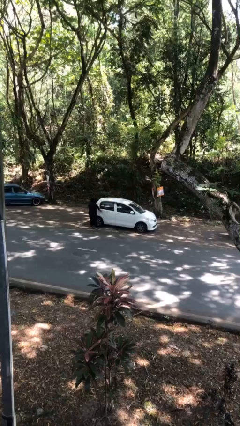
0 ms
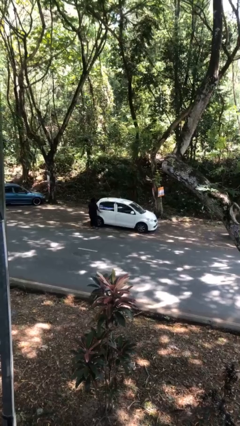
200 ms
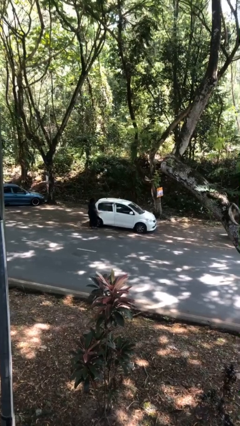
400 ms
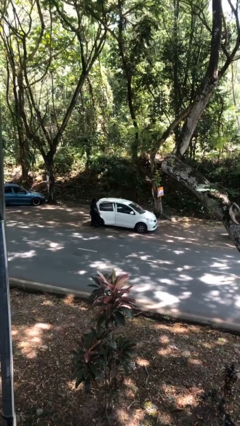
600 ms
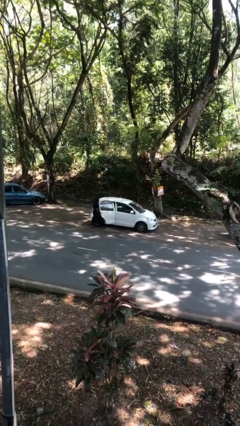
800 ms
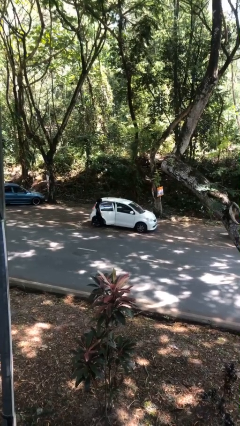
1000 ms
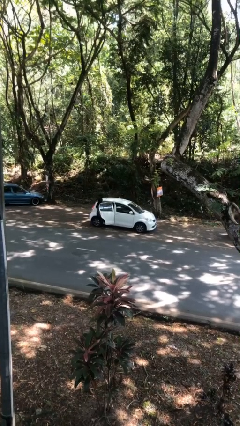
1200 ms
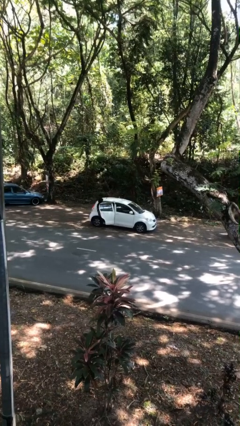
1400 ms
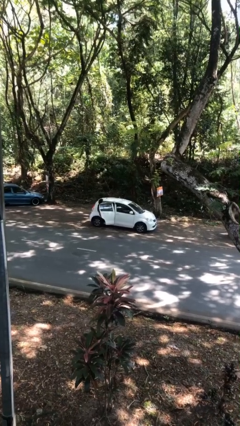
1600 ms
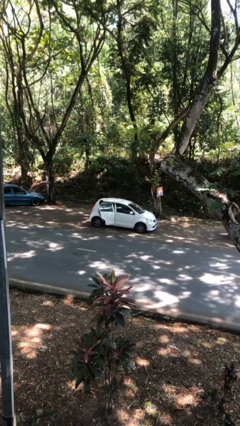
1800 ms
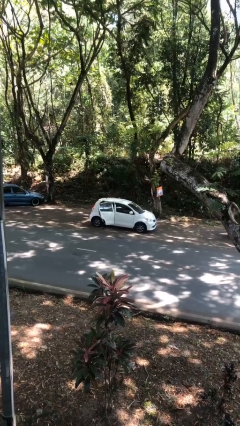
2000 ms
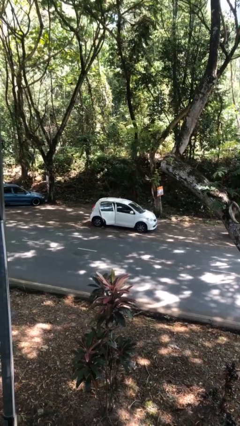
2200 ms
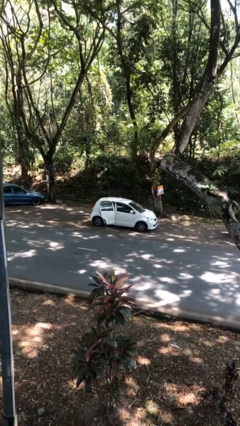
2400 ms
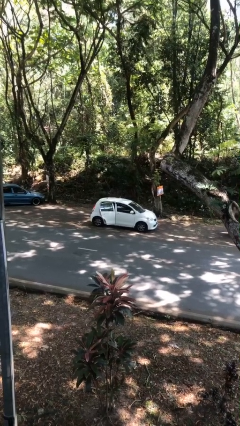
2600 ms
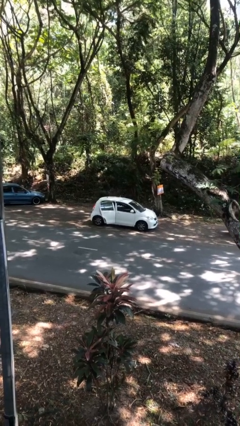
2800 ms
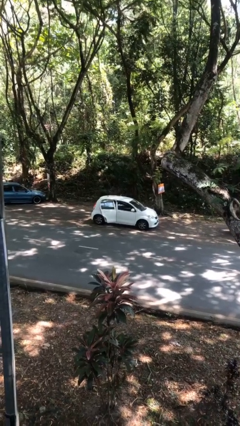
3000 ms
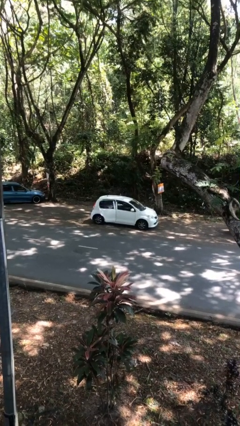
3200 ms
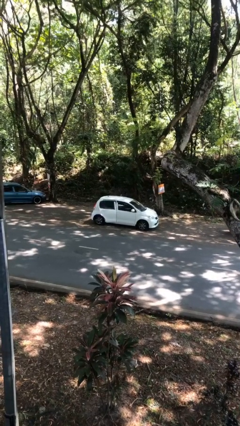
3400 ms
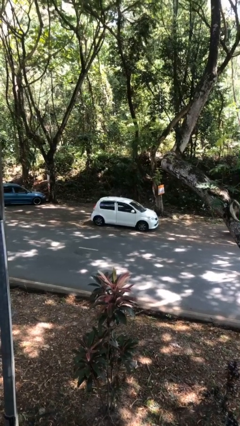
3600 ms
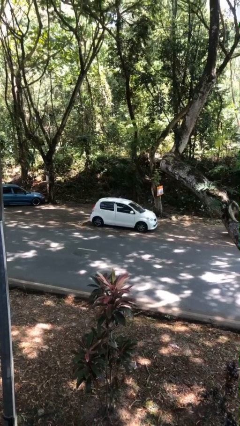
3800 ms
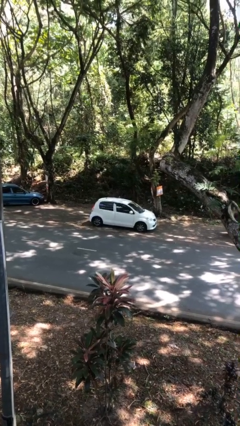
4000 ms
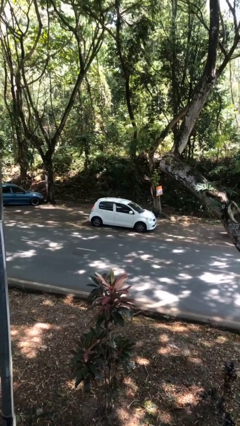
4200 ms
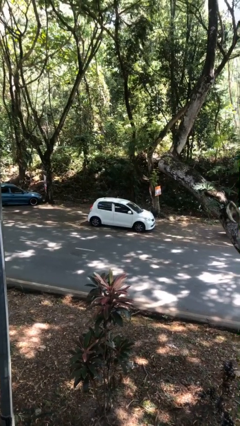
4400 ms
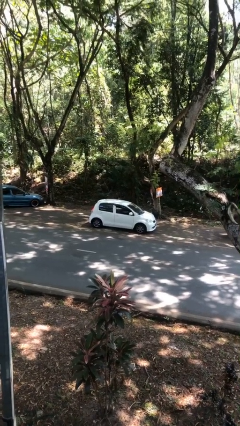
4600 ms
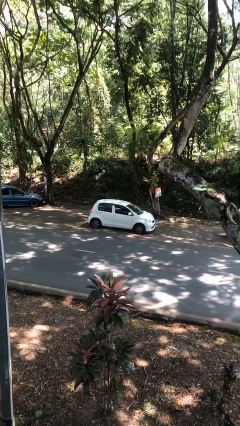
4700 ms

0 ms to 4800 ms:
car picks up person

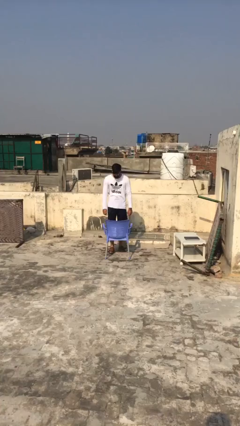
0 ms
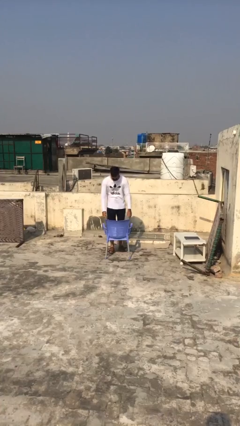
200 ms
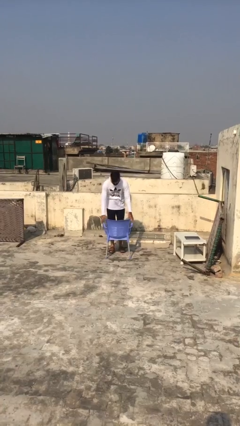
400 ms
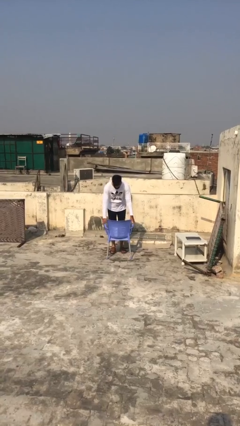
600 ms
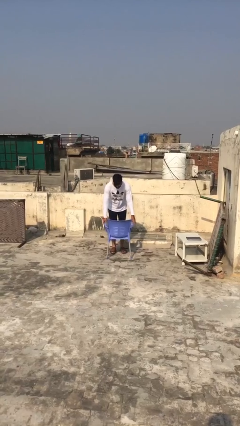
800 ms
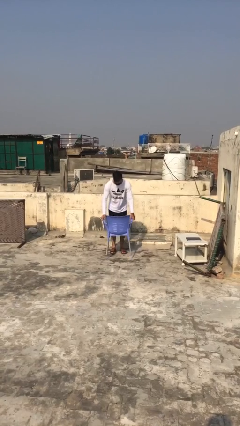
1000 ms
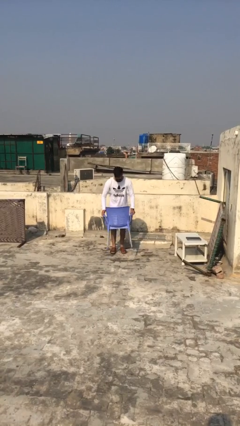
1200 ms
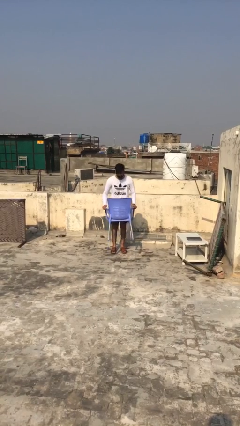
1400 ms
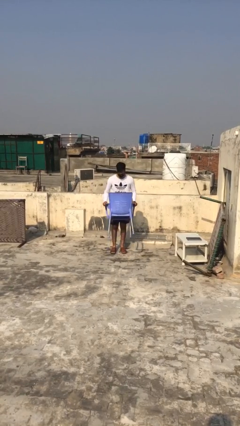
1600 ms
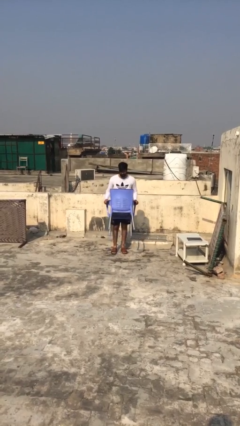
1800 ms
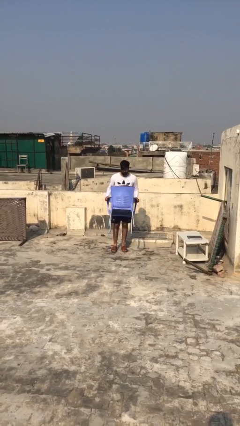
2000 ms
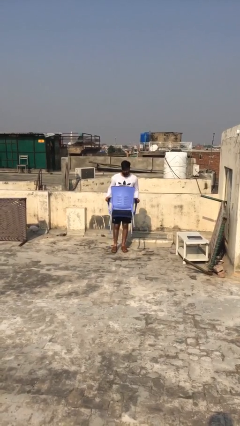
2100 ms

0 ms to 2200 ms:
person picks up object from floor

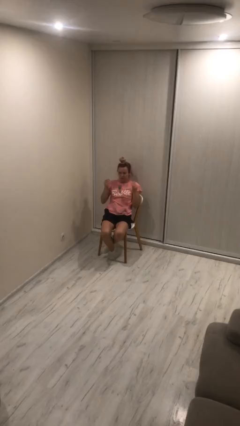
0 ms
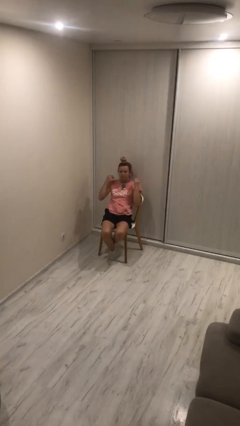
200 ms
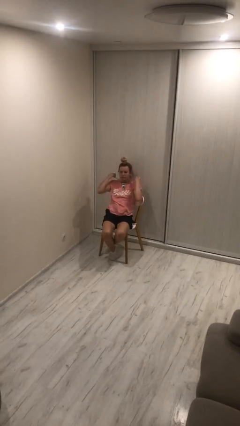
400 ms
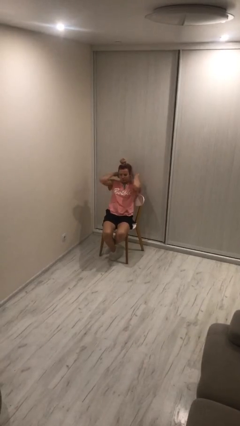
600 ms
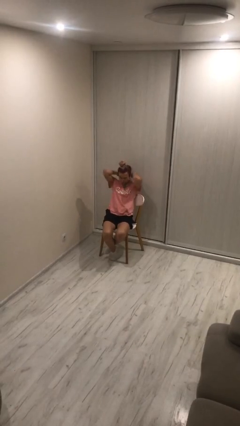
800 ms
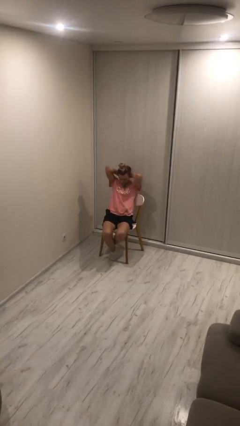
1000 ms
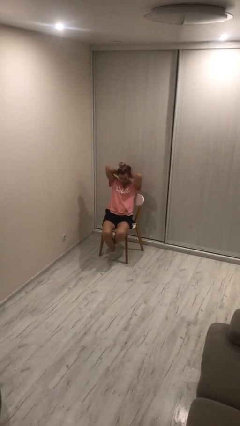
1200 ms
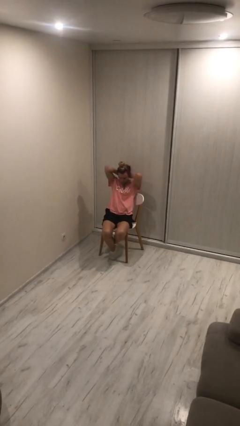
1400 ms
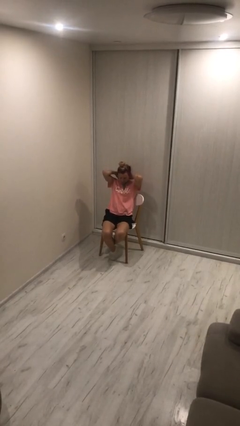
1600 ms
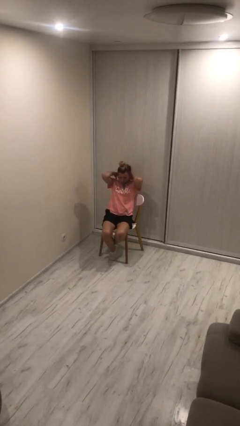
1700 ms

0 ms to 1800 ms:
person puts on necklace

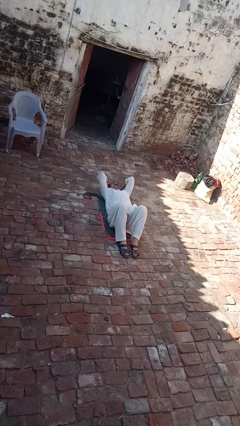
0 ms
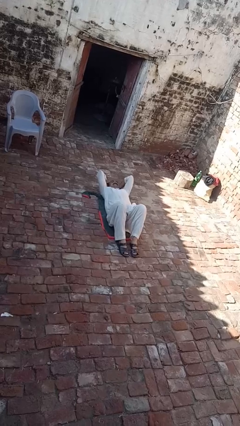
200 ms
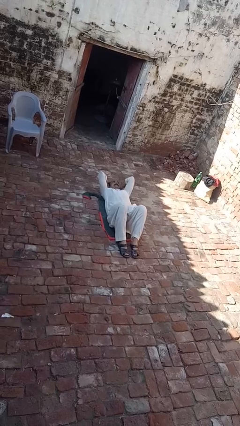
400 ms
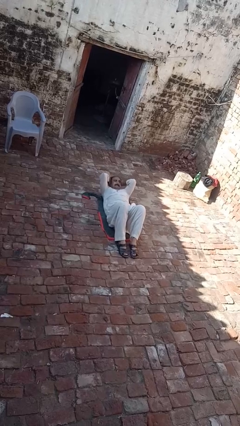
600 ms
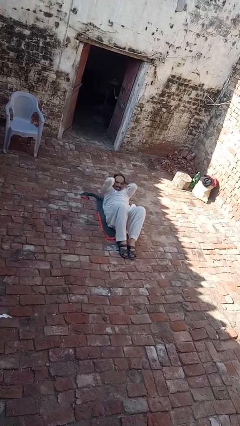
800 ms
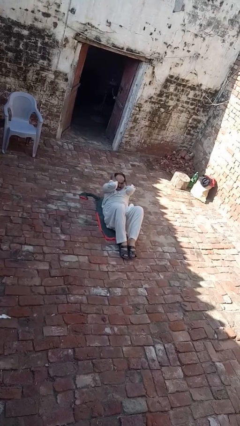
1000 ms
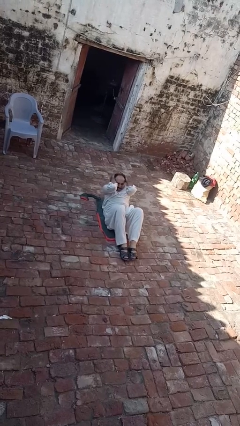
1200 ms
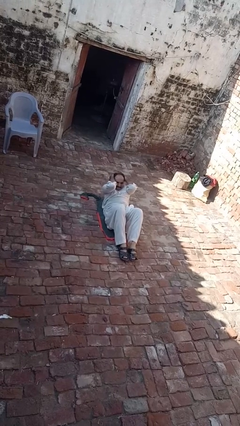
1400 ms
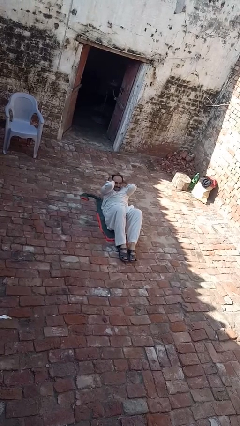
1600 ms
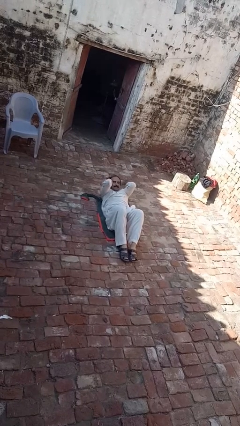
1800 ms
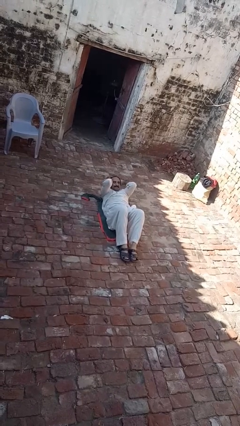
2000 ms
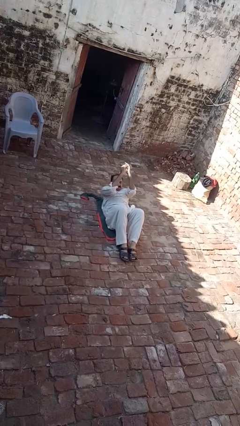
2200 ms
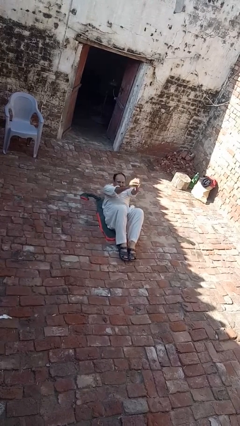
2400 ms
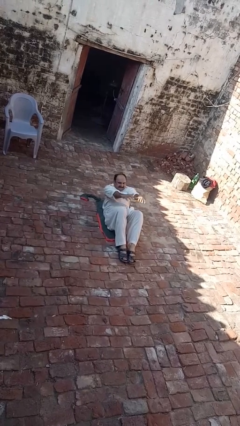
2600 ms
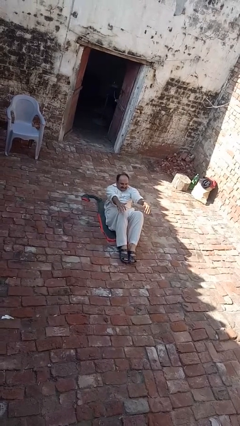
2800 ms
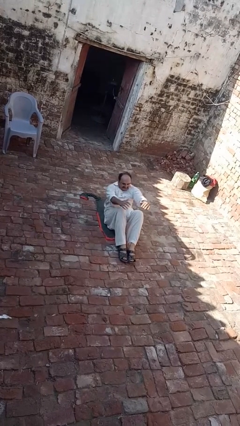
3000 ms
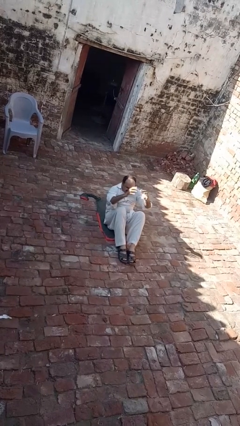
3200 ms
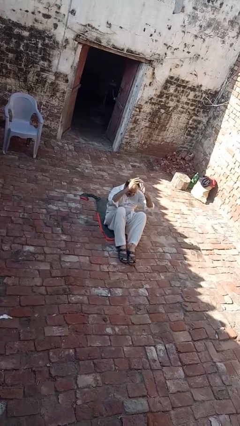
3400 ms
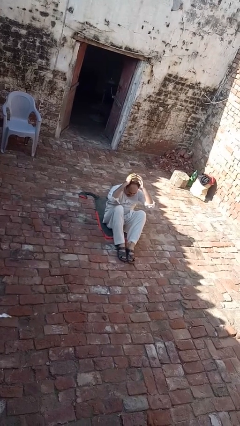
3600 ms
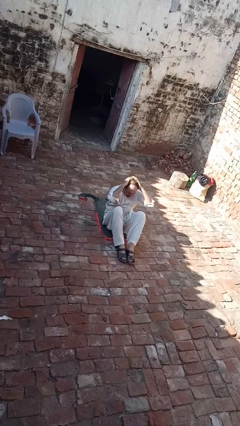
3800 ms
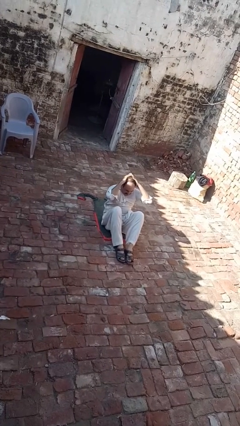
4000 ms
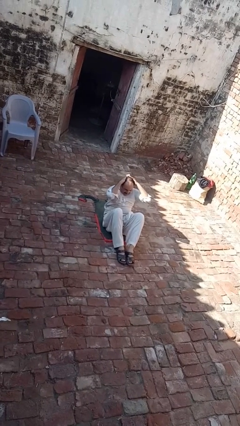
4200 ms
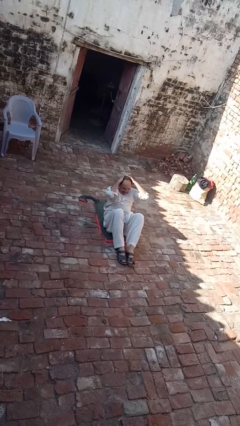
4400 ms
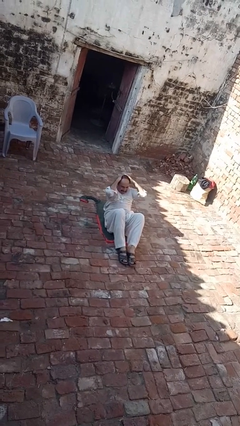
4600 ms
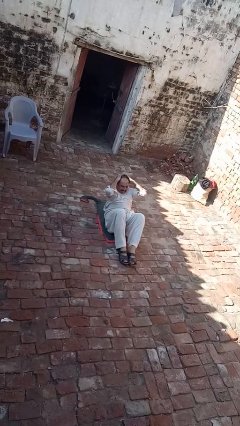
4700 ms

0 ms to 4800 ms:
person exercises with situp

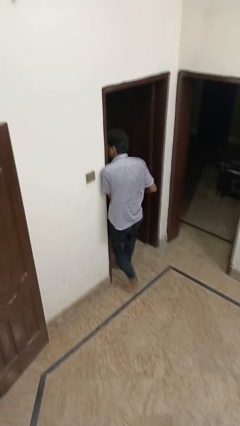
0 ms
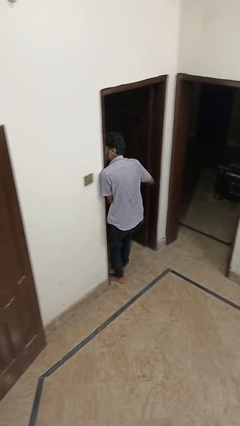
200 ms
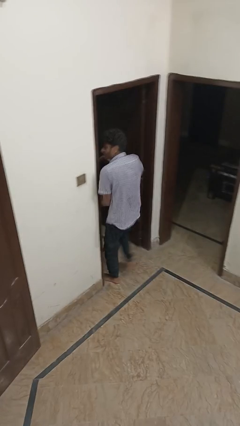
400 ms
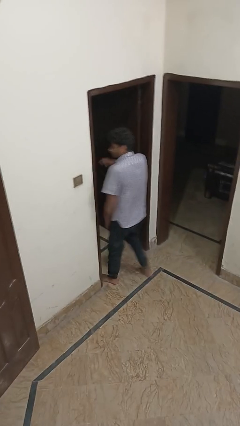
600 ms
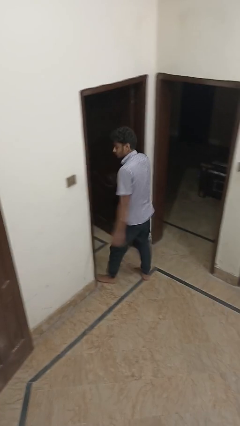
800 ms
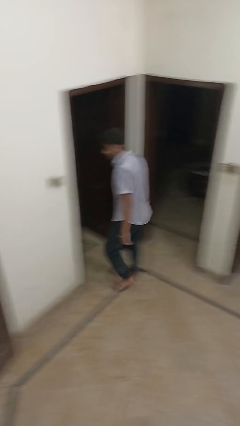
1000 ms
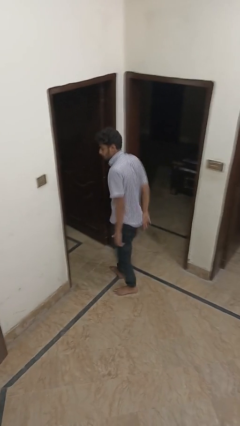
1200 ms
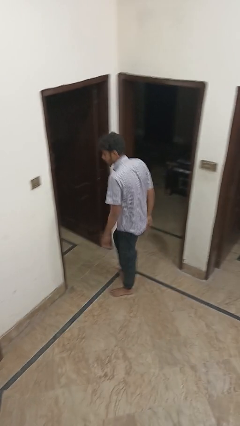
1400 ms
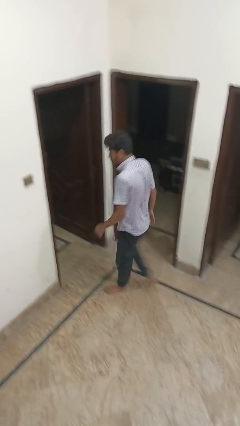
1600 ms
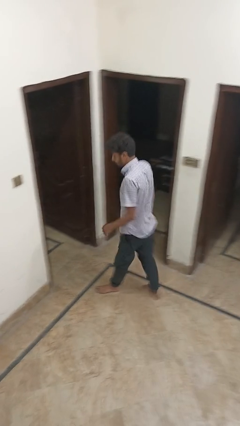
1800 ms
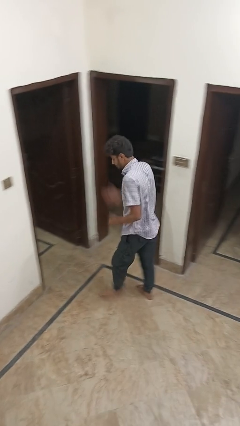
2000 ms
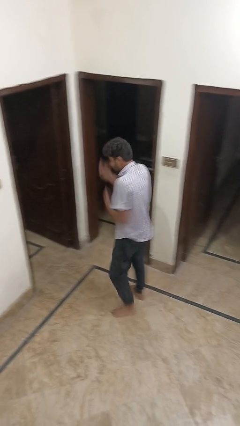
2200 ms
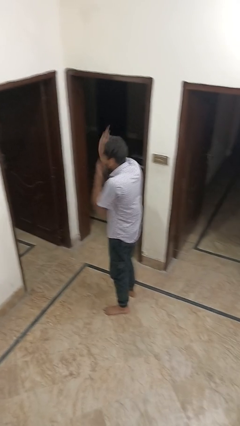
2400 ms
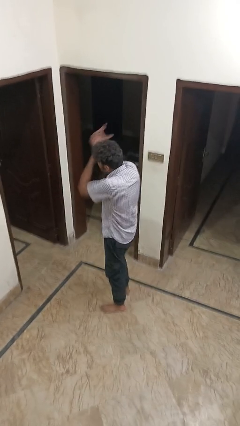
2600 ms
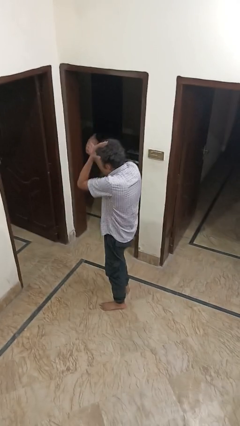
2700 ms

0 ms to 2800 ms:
person bumps into wall

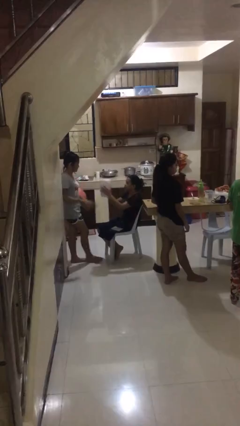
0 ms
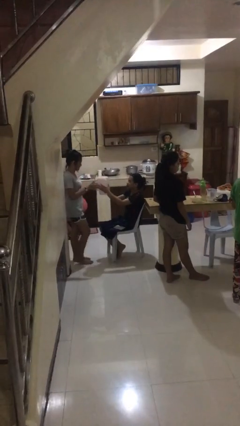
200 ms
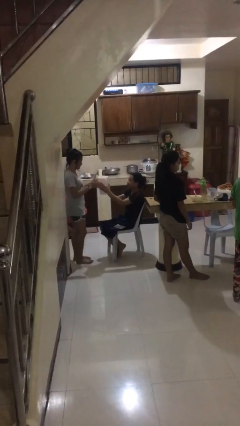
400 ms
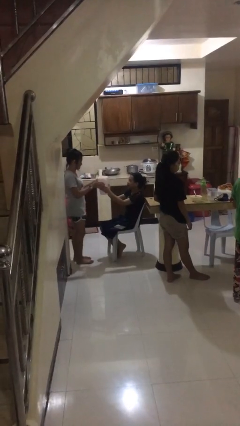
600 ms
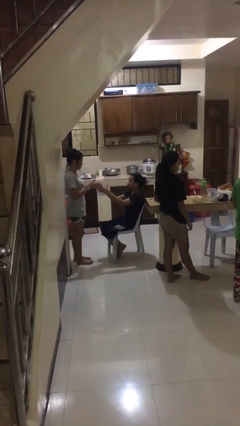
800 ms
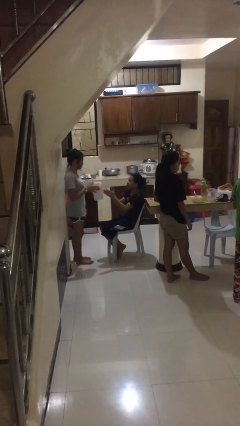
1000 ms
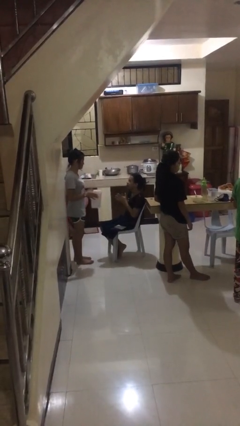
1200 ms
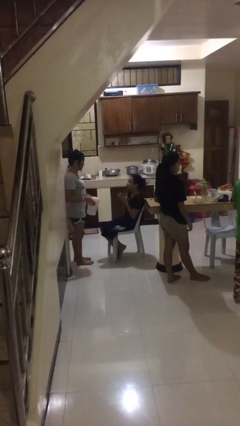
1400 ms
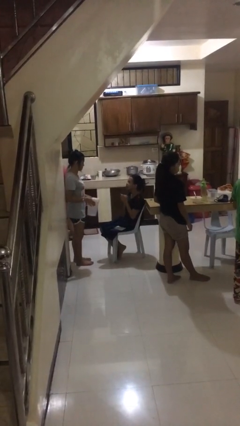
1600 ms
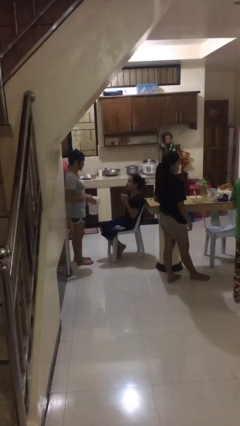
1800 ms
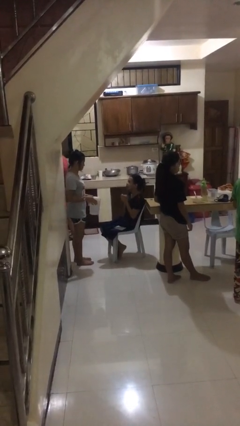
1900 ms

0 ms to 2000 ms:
person transfers object to person
